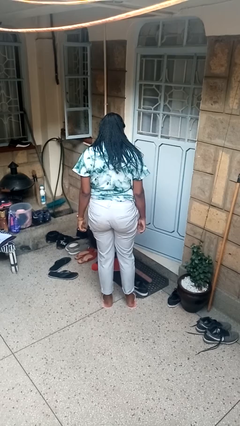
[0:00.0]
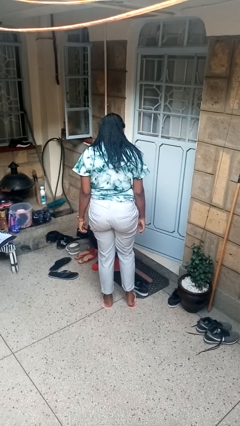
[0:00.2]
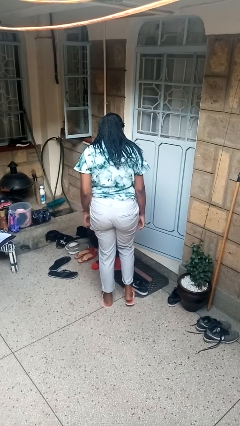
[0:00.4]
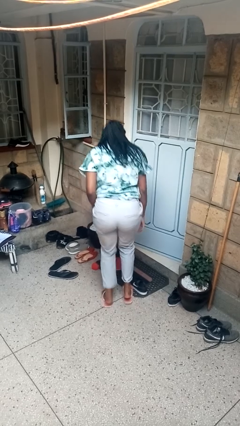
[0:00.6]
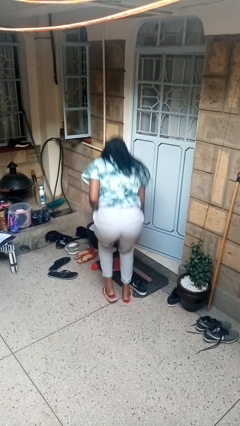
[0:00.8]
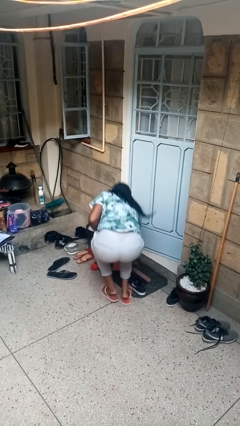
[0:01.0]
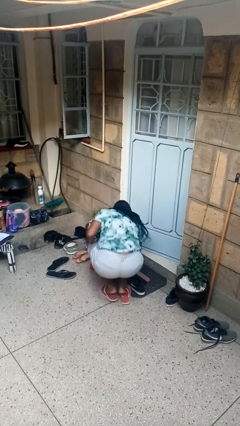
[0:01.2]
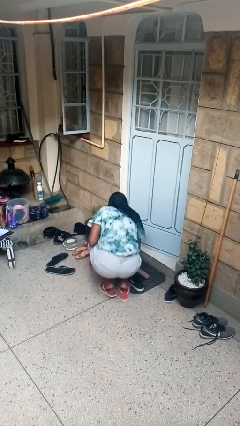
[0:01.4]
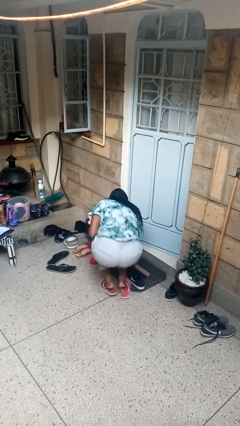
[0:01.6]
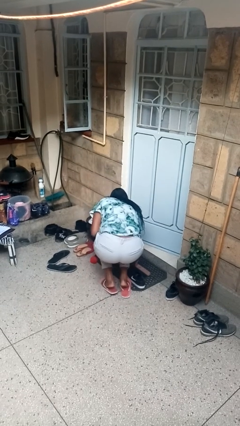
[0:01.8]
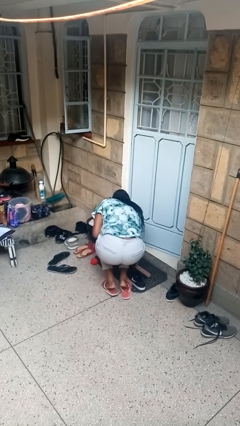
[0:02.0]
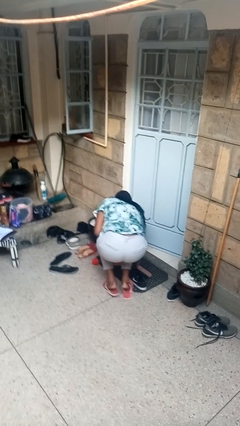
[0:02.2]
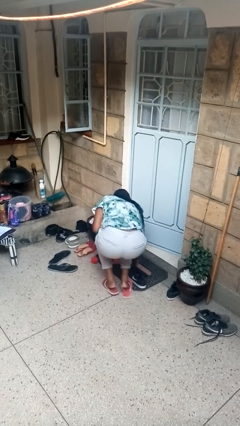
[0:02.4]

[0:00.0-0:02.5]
person trips on object on floor

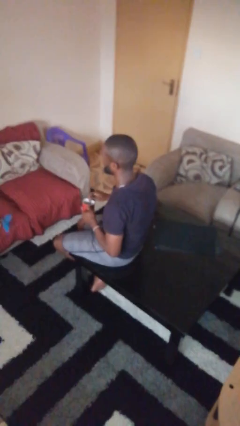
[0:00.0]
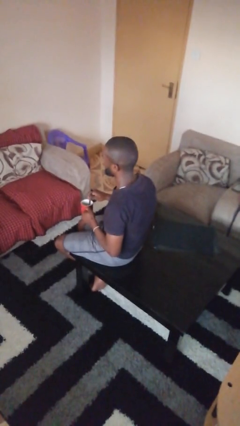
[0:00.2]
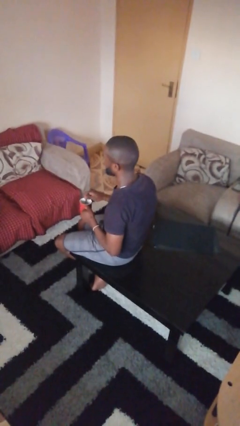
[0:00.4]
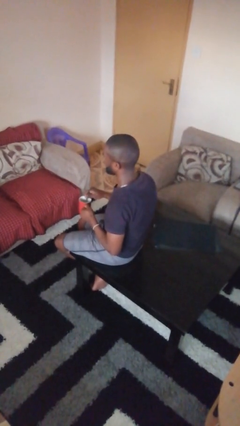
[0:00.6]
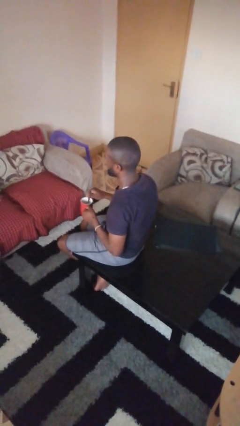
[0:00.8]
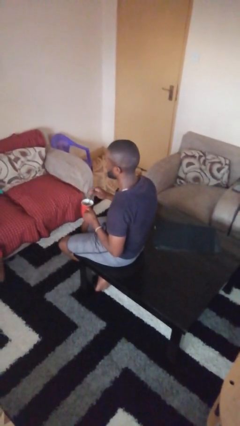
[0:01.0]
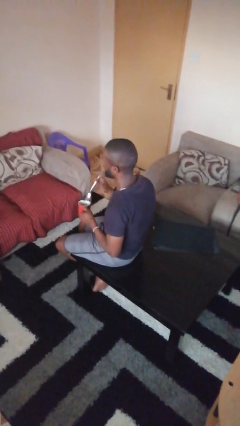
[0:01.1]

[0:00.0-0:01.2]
person stirs mug

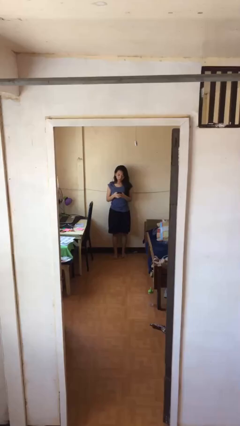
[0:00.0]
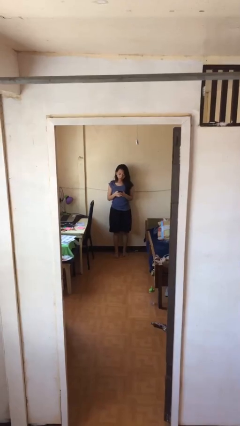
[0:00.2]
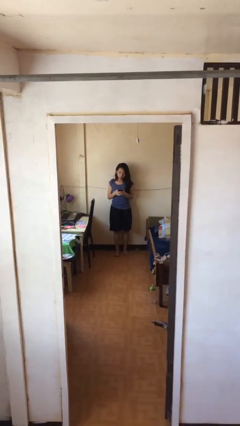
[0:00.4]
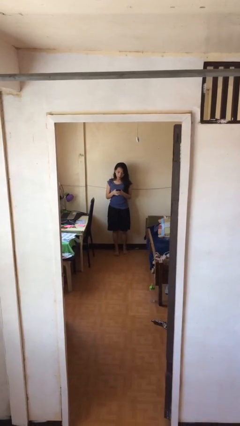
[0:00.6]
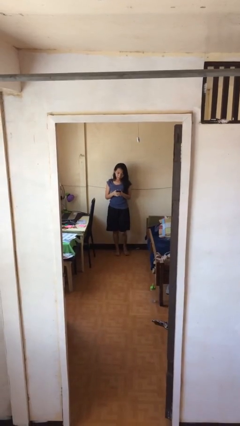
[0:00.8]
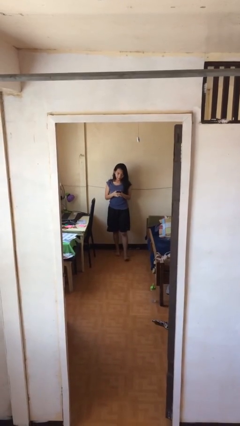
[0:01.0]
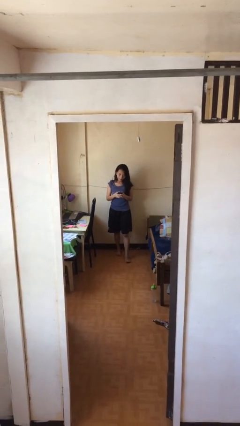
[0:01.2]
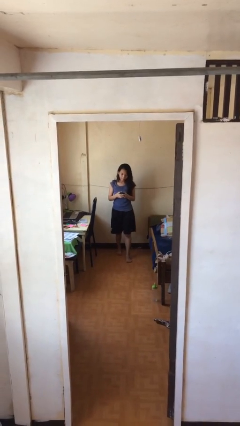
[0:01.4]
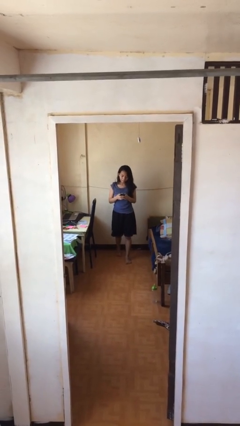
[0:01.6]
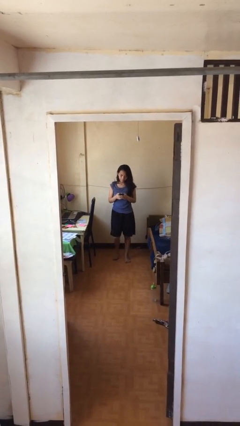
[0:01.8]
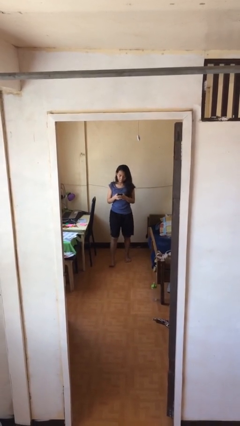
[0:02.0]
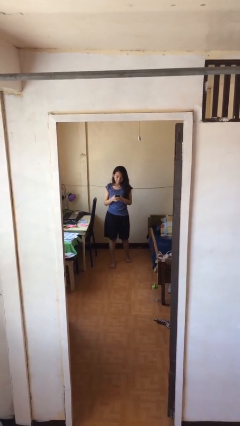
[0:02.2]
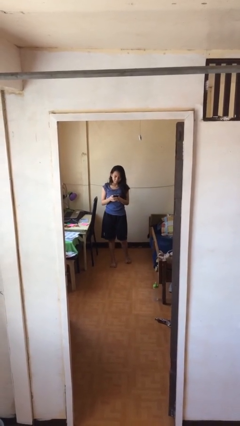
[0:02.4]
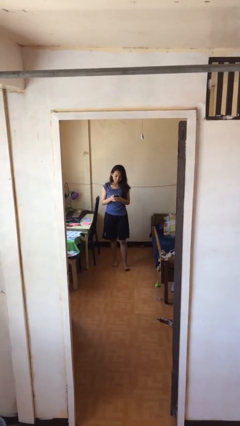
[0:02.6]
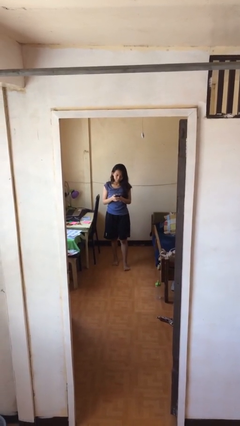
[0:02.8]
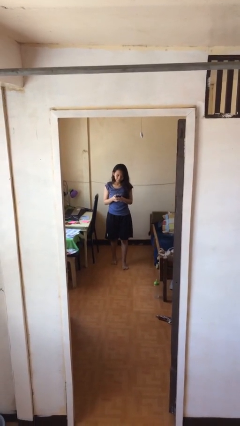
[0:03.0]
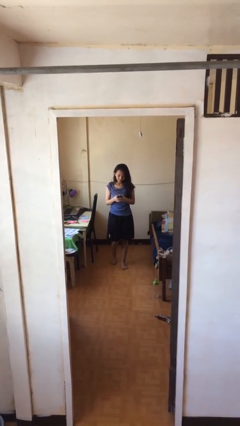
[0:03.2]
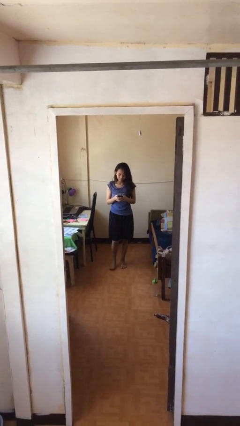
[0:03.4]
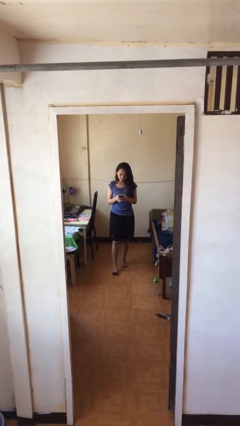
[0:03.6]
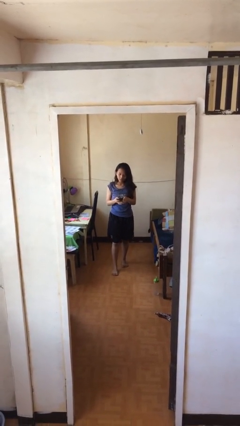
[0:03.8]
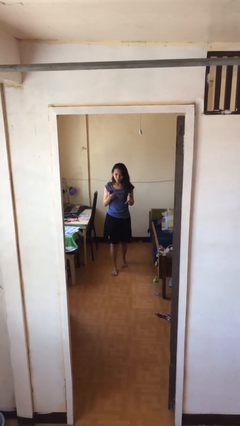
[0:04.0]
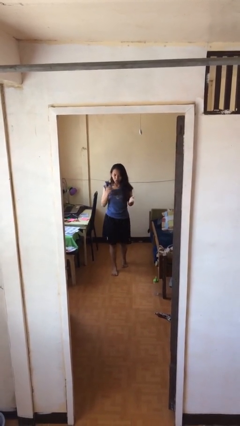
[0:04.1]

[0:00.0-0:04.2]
person texts on phone

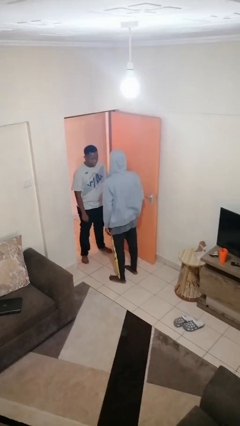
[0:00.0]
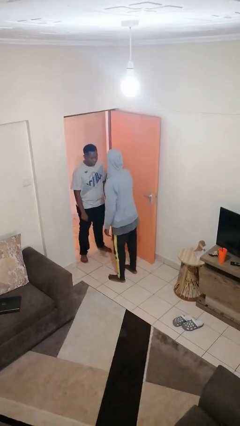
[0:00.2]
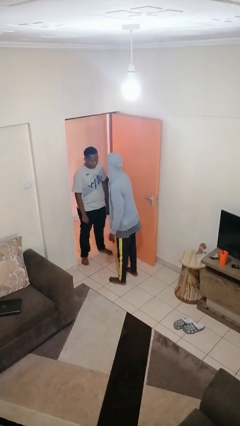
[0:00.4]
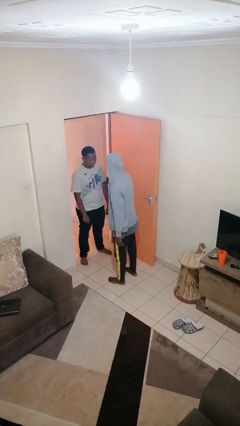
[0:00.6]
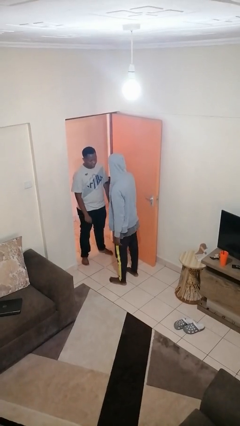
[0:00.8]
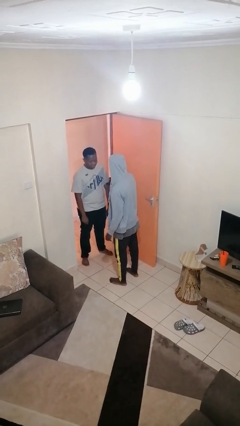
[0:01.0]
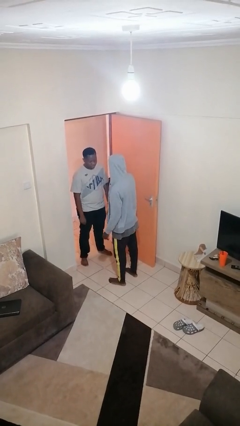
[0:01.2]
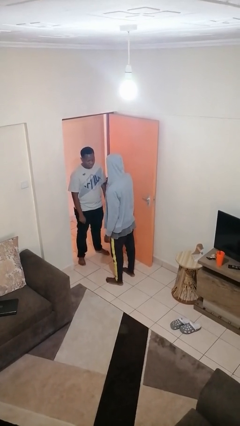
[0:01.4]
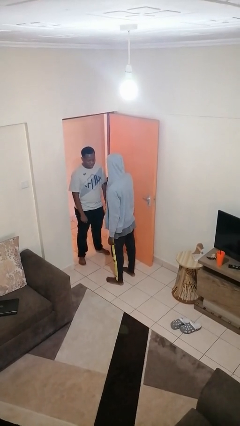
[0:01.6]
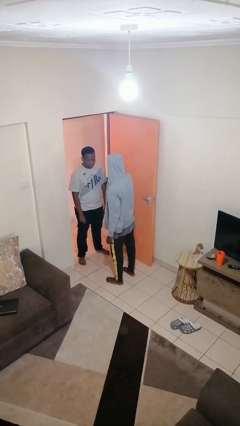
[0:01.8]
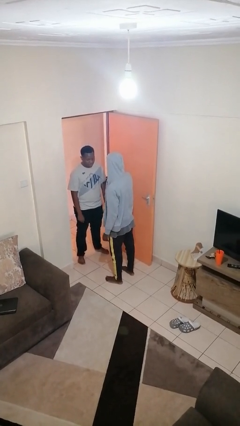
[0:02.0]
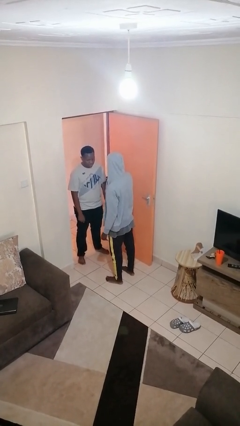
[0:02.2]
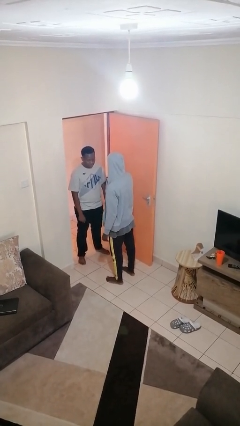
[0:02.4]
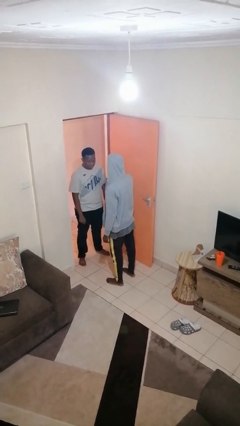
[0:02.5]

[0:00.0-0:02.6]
person grabs person by bicep

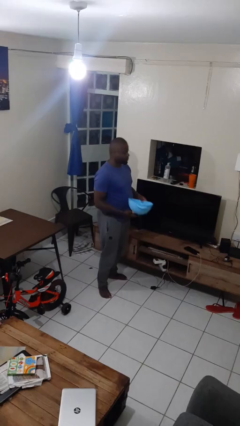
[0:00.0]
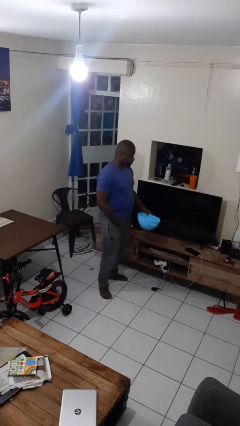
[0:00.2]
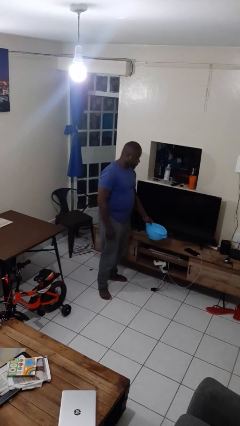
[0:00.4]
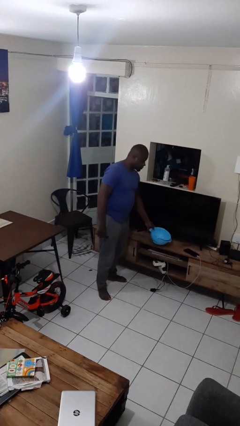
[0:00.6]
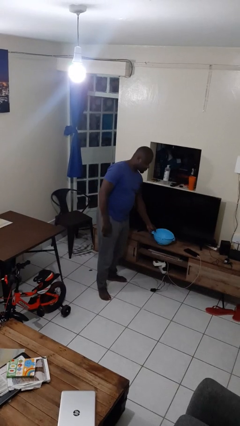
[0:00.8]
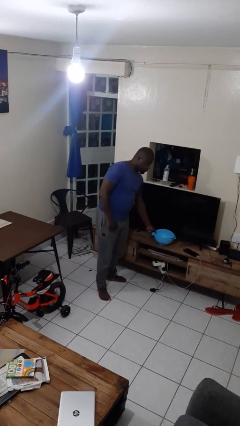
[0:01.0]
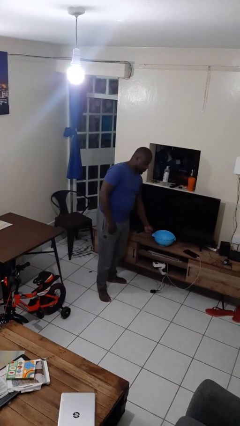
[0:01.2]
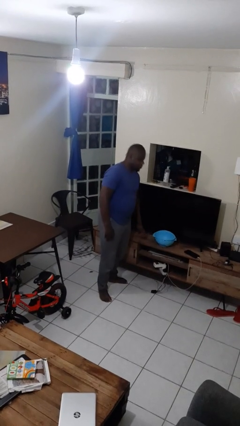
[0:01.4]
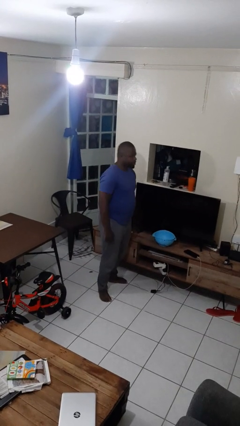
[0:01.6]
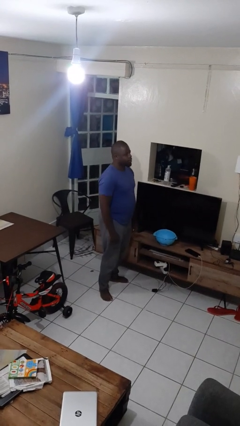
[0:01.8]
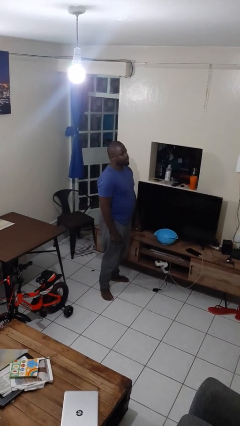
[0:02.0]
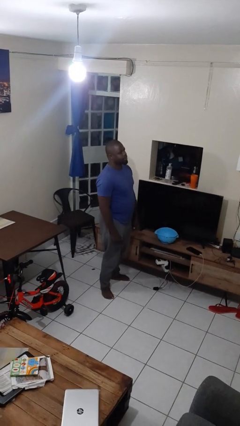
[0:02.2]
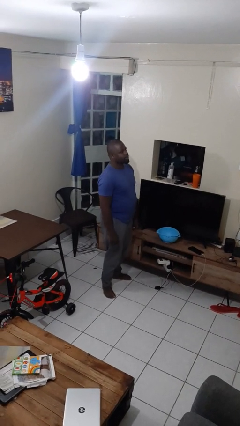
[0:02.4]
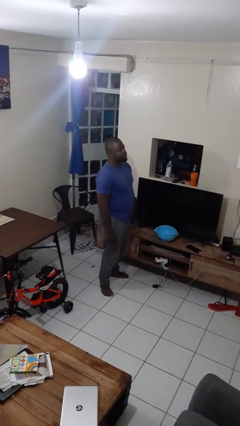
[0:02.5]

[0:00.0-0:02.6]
person puts down object on countertop

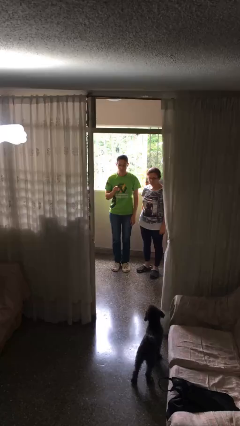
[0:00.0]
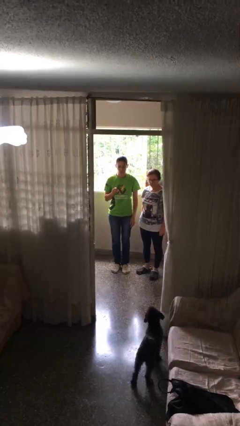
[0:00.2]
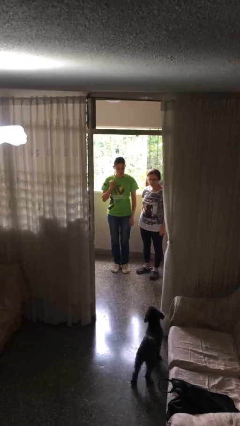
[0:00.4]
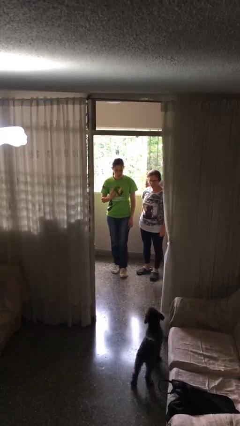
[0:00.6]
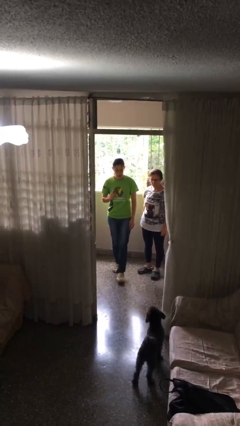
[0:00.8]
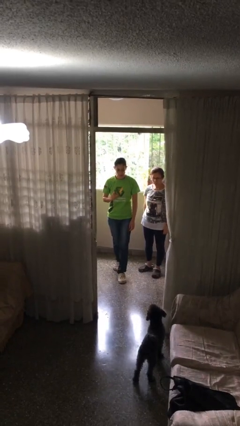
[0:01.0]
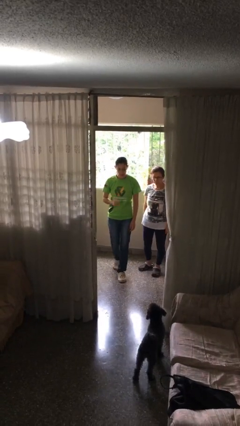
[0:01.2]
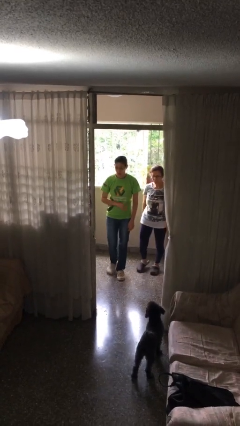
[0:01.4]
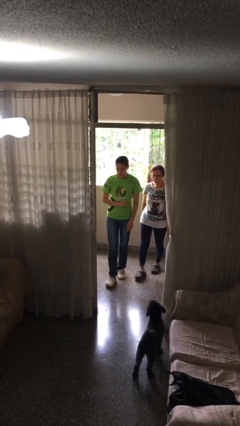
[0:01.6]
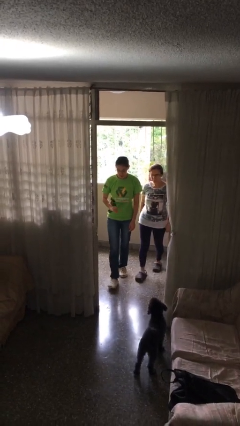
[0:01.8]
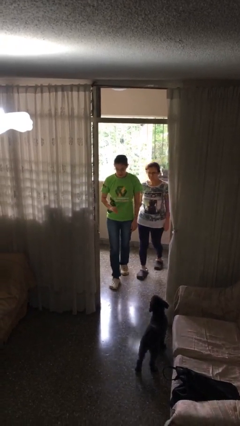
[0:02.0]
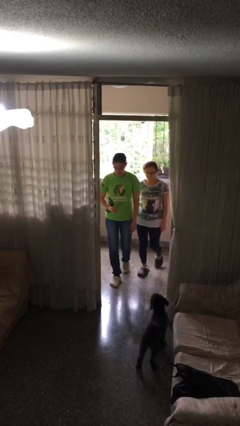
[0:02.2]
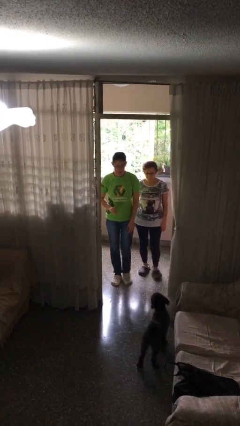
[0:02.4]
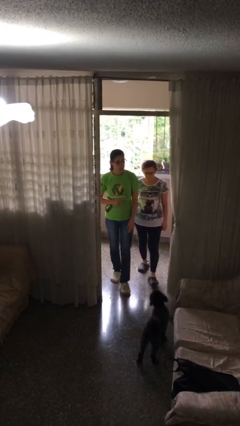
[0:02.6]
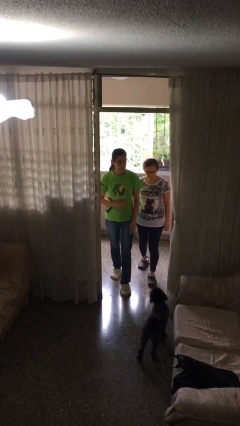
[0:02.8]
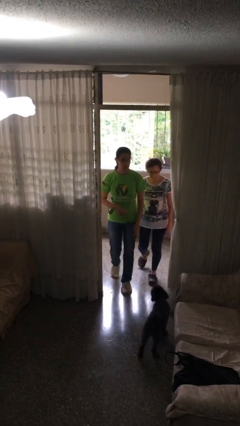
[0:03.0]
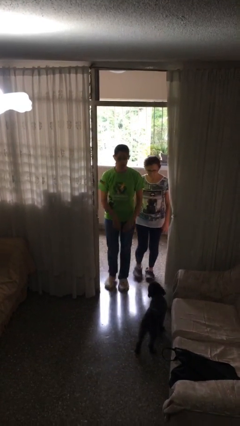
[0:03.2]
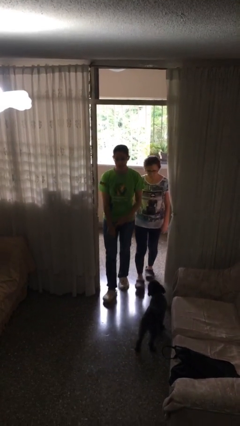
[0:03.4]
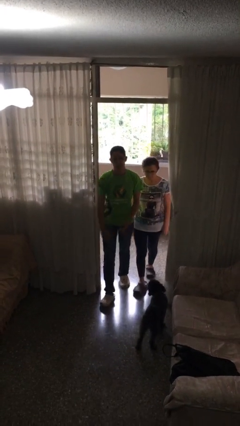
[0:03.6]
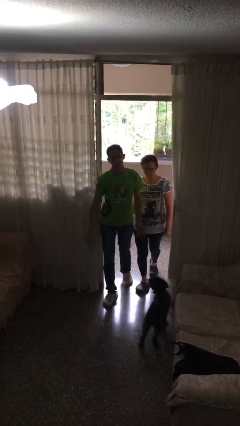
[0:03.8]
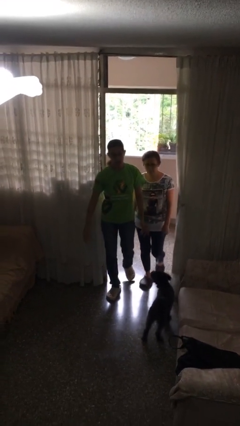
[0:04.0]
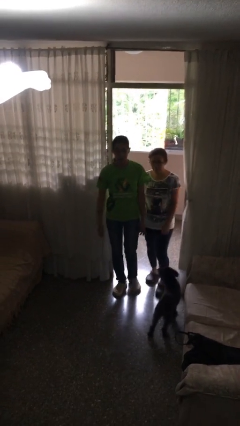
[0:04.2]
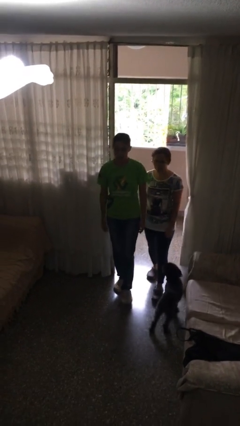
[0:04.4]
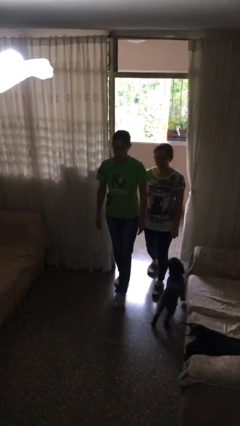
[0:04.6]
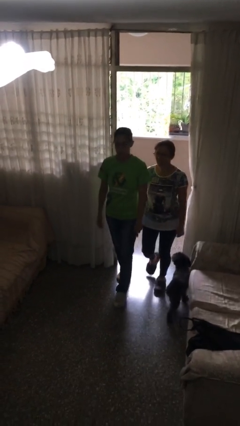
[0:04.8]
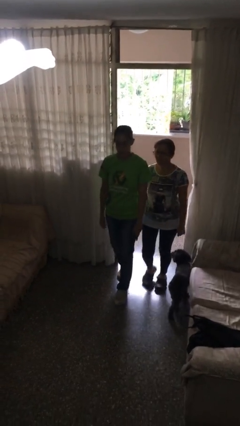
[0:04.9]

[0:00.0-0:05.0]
person talks to person
